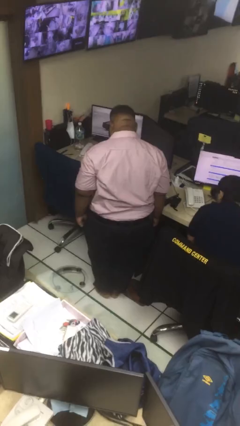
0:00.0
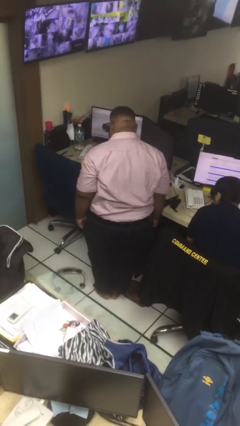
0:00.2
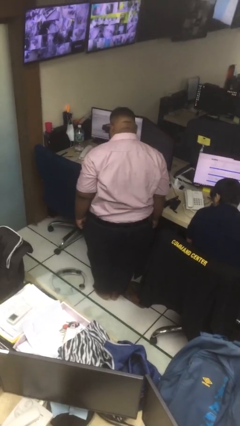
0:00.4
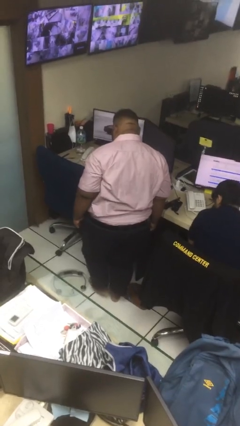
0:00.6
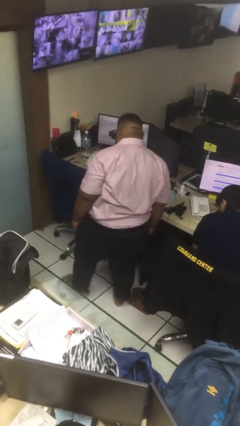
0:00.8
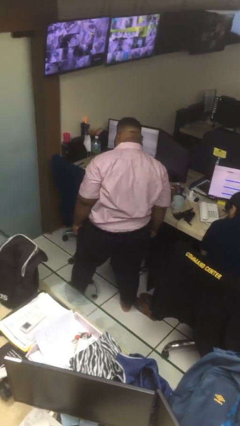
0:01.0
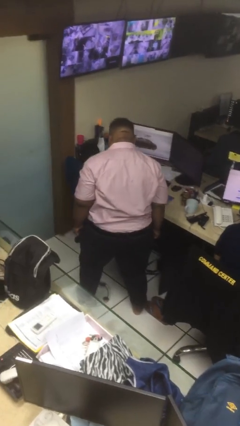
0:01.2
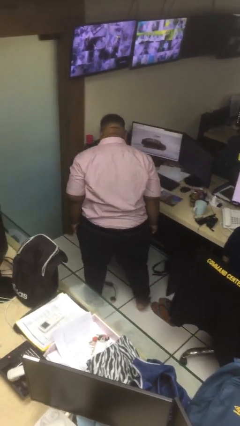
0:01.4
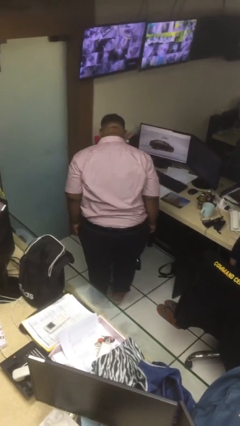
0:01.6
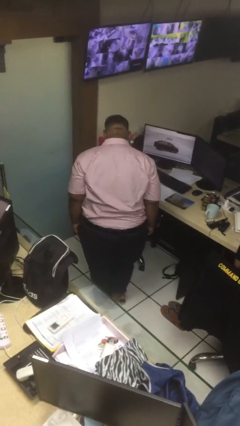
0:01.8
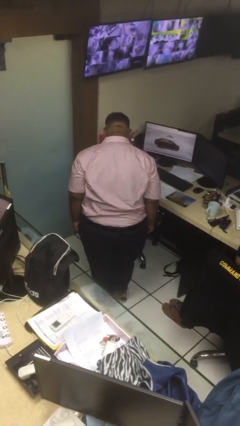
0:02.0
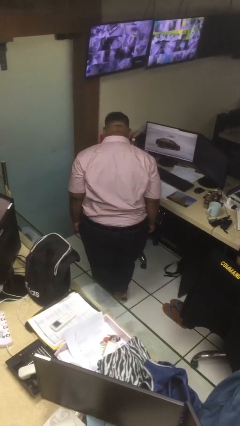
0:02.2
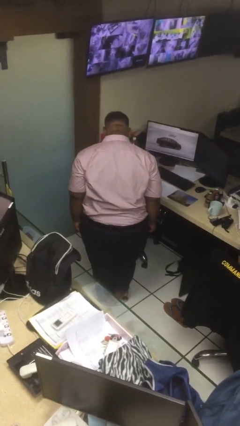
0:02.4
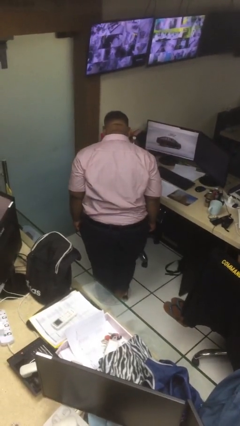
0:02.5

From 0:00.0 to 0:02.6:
person uses bodyweight scale

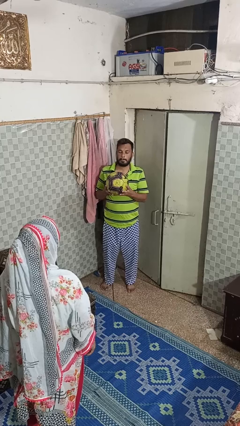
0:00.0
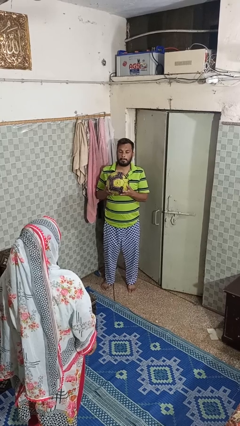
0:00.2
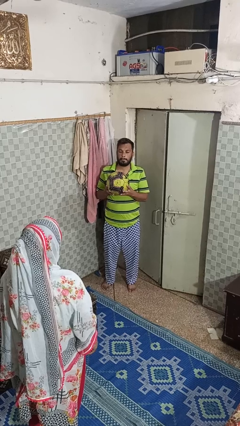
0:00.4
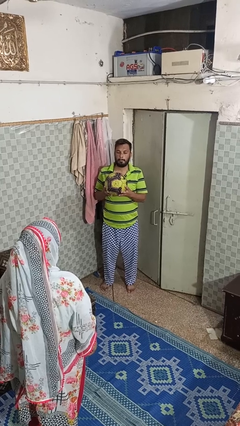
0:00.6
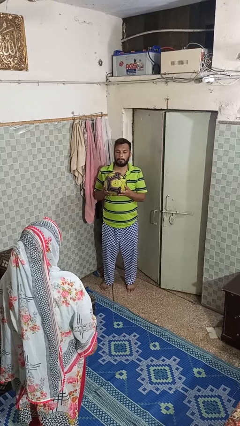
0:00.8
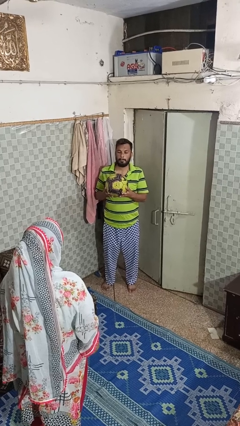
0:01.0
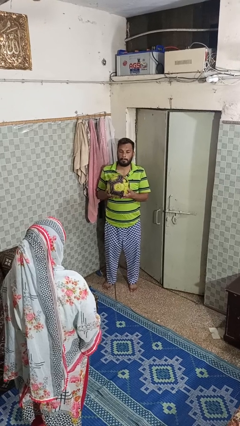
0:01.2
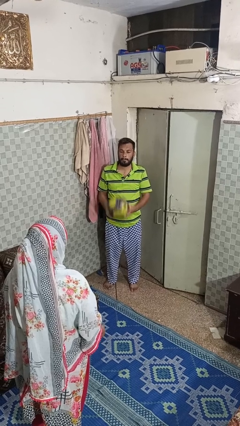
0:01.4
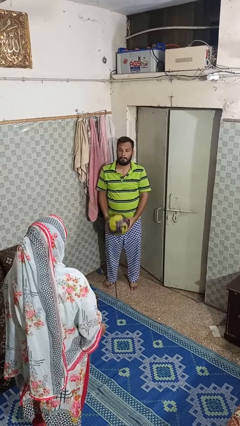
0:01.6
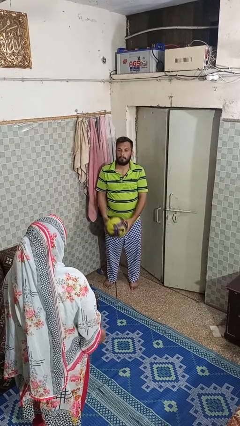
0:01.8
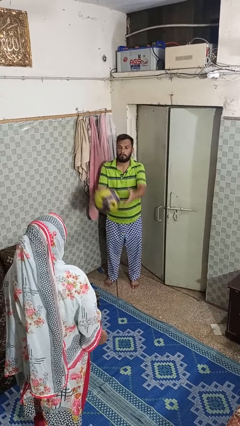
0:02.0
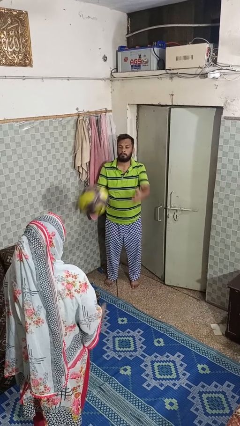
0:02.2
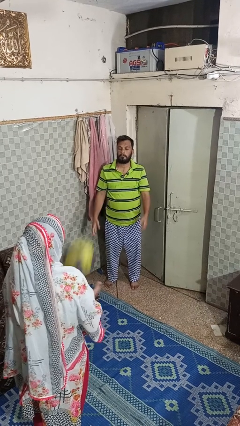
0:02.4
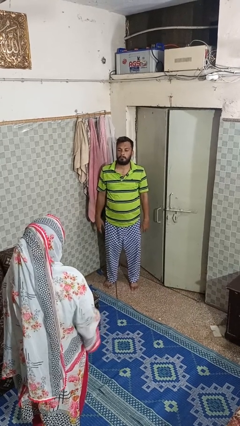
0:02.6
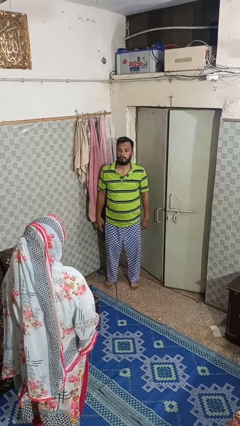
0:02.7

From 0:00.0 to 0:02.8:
person throws object to person

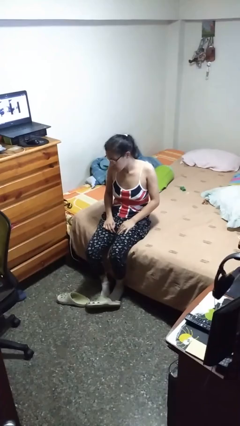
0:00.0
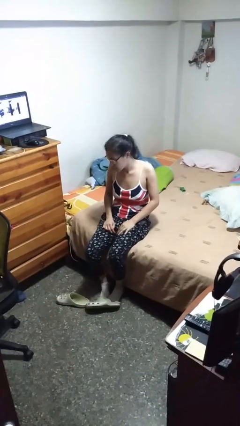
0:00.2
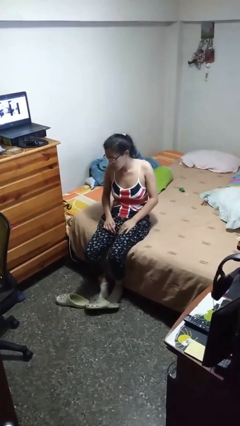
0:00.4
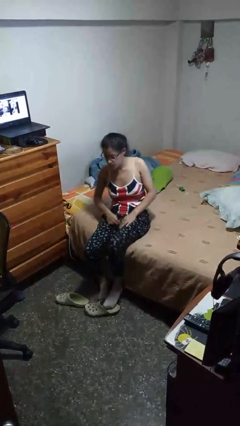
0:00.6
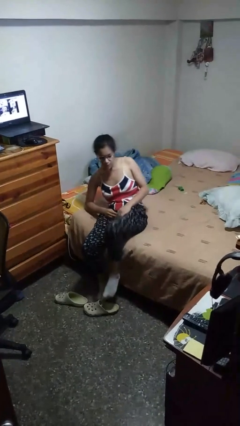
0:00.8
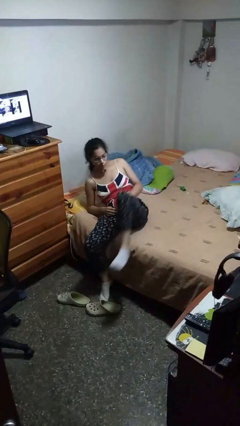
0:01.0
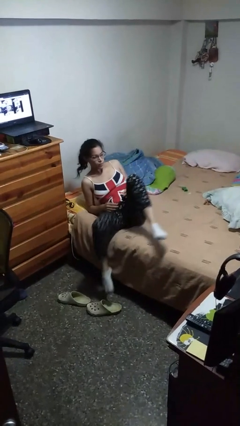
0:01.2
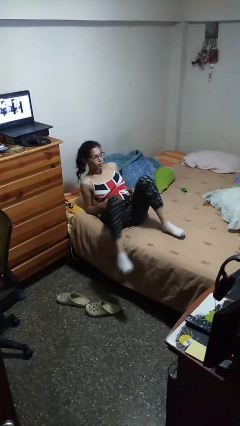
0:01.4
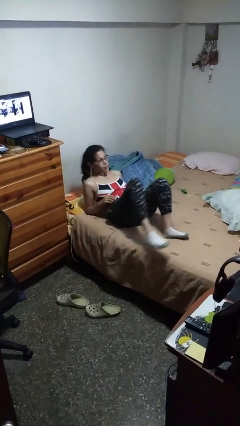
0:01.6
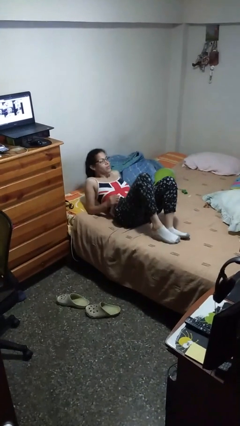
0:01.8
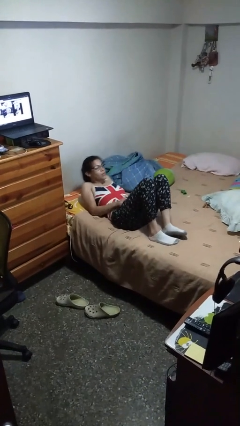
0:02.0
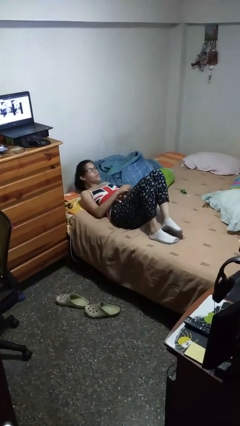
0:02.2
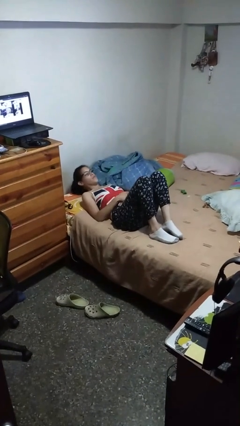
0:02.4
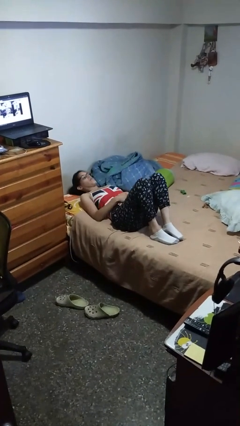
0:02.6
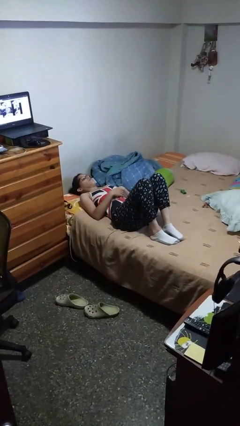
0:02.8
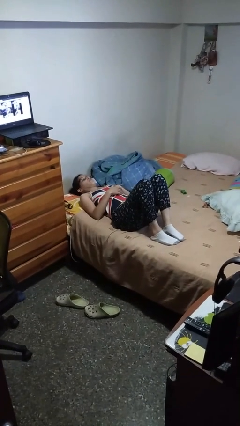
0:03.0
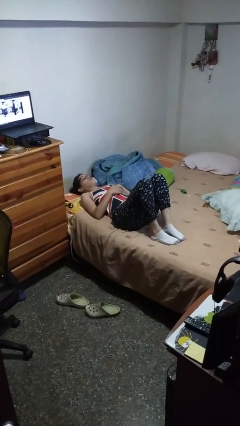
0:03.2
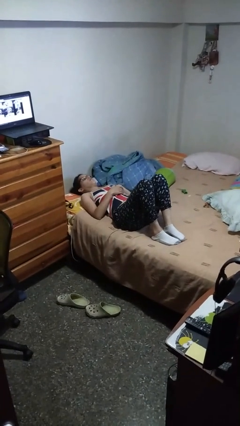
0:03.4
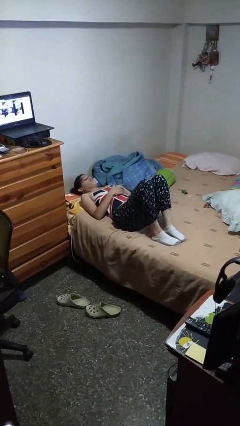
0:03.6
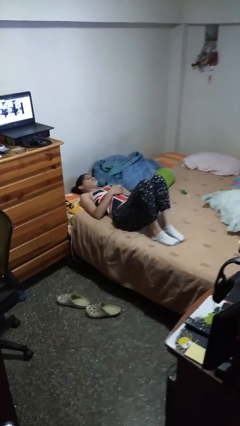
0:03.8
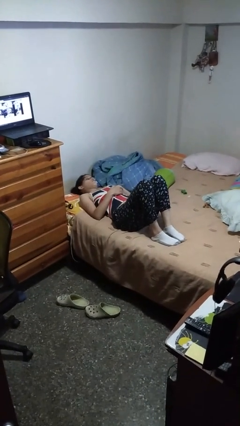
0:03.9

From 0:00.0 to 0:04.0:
person lies down on bed

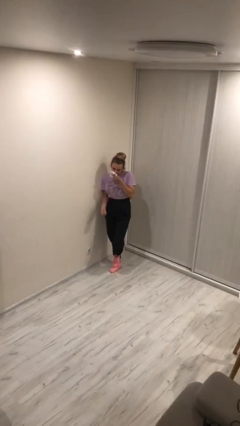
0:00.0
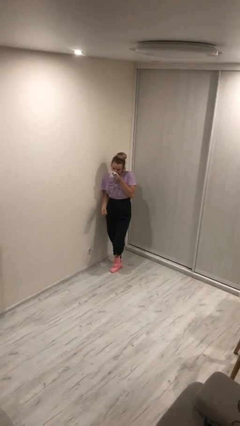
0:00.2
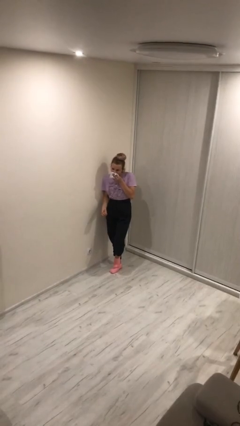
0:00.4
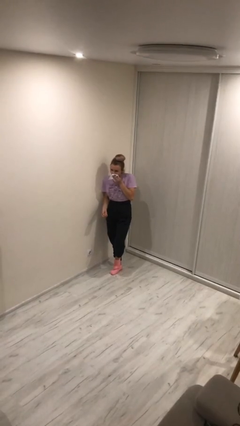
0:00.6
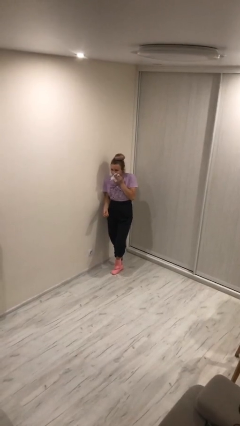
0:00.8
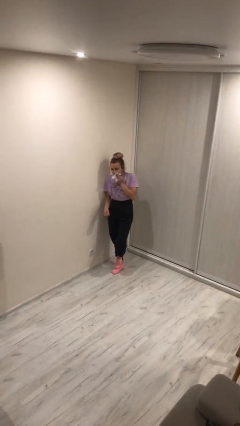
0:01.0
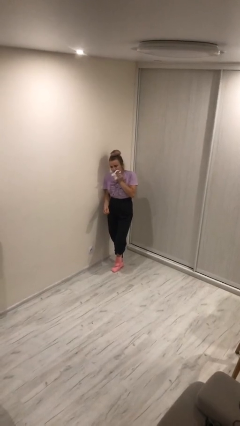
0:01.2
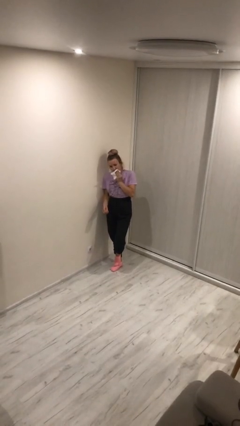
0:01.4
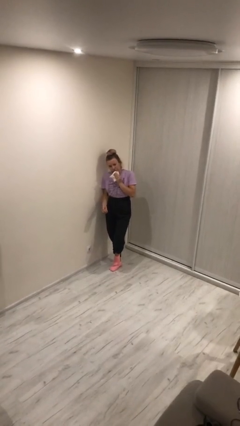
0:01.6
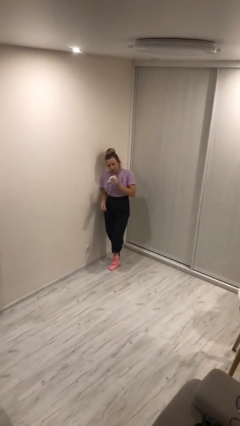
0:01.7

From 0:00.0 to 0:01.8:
person wipes mouth with napkin

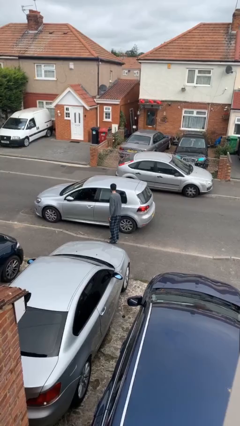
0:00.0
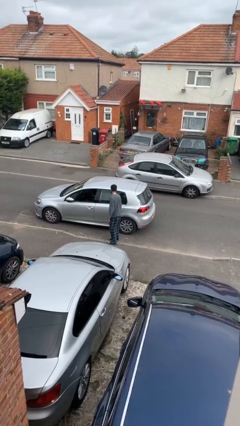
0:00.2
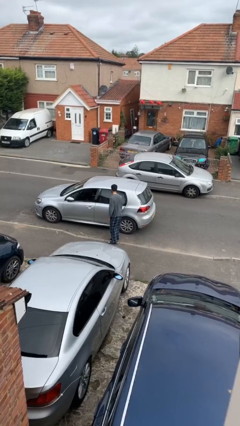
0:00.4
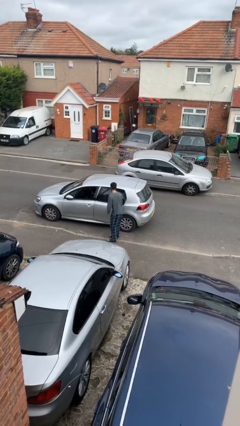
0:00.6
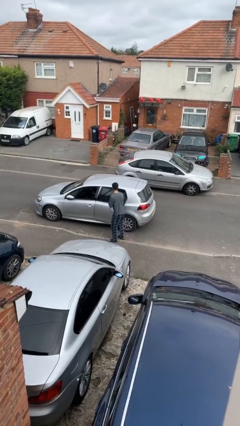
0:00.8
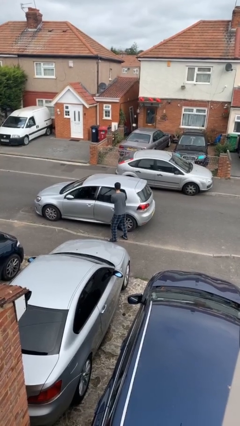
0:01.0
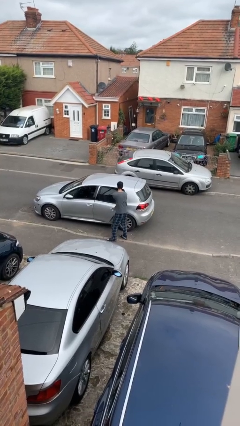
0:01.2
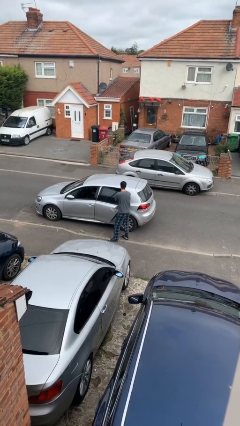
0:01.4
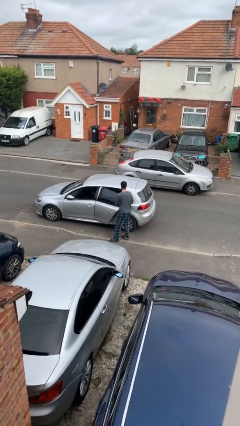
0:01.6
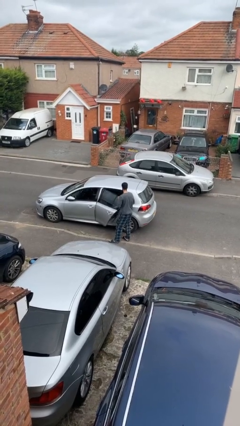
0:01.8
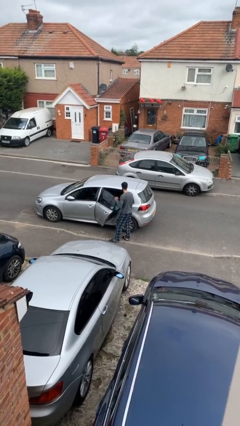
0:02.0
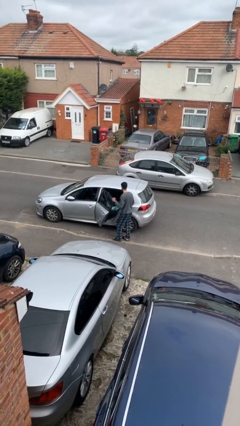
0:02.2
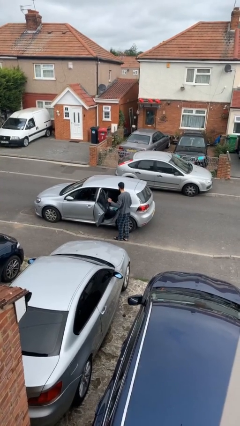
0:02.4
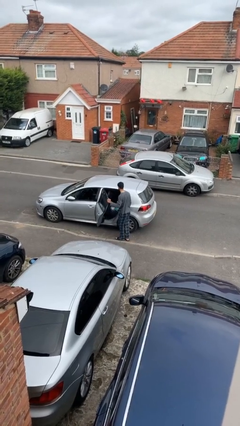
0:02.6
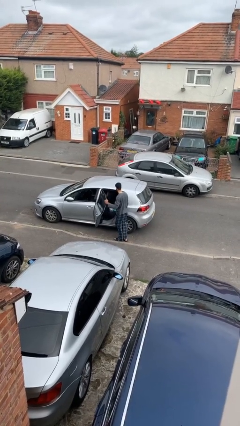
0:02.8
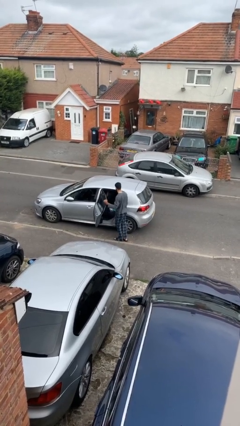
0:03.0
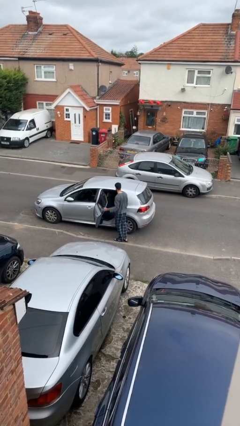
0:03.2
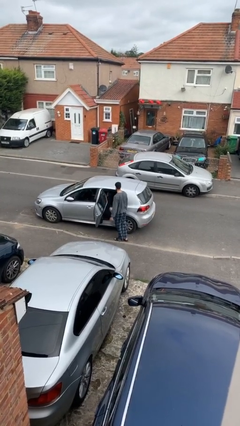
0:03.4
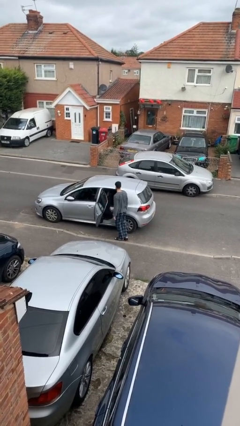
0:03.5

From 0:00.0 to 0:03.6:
person opens car door

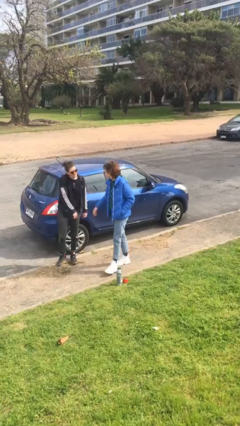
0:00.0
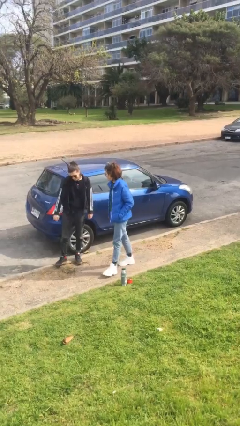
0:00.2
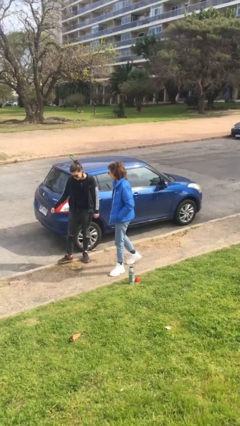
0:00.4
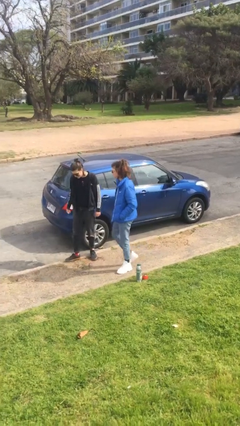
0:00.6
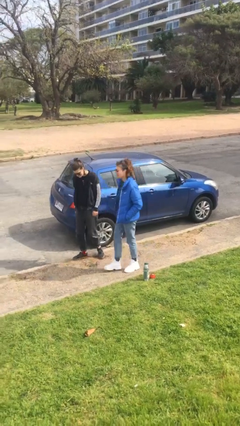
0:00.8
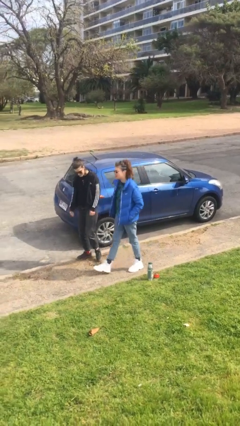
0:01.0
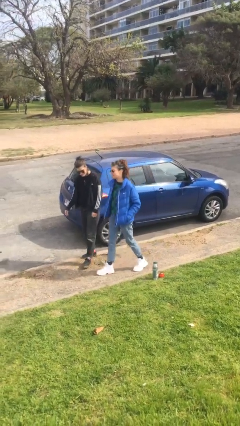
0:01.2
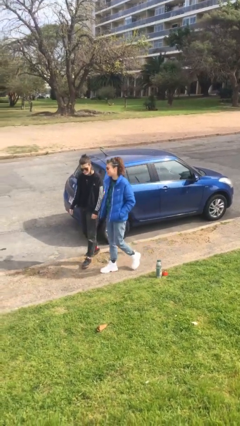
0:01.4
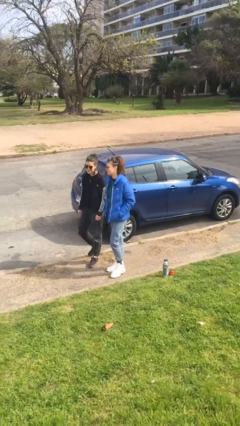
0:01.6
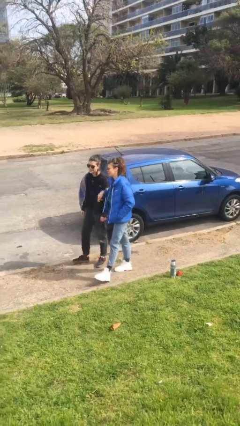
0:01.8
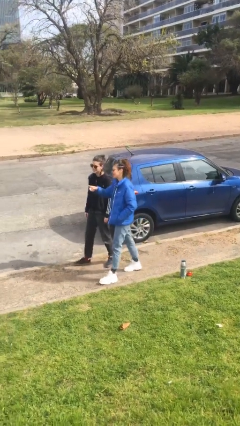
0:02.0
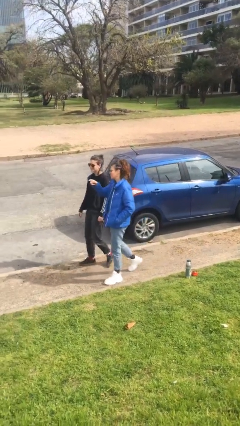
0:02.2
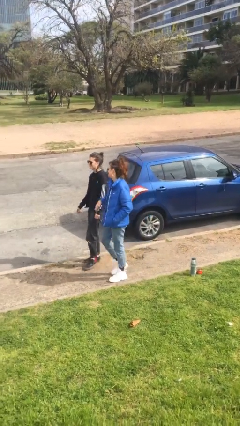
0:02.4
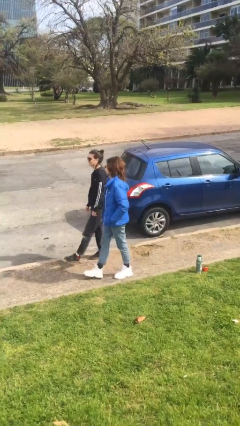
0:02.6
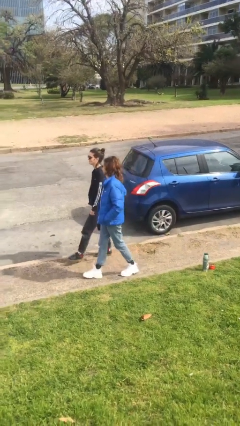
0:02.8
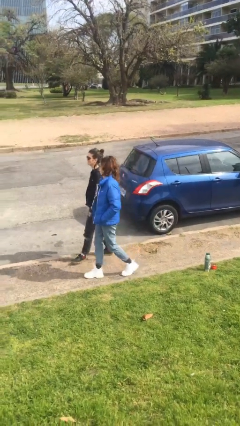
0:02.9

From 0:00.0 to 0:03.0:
person talks to person
